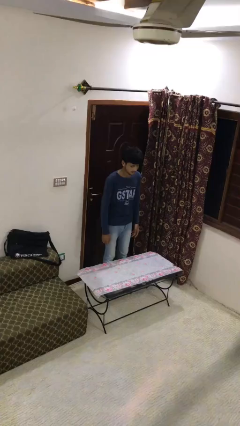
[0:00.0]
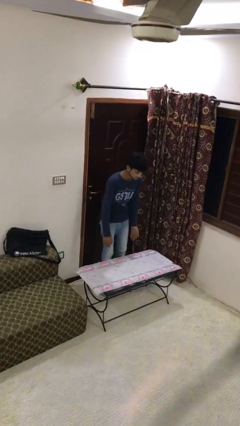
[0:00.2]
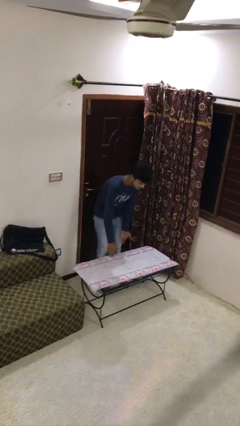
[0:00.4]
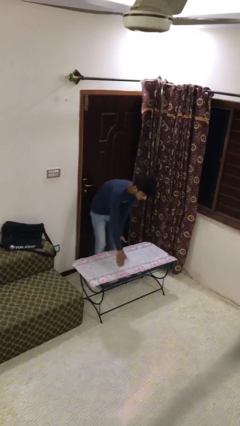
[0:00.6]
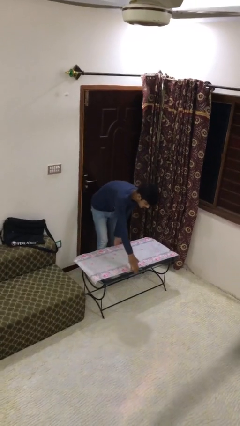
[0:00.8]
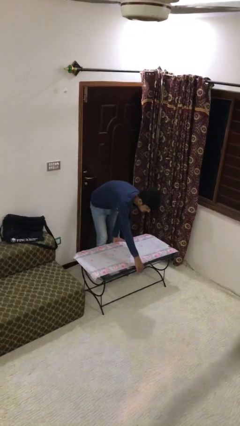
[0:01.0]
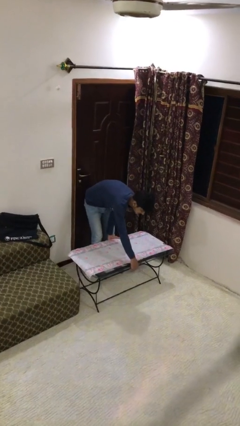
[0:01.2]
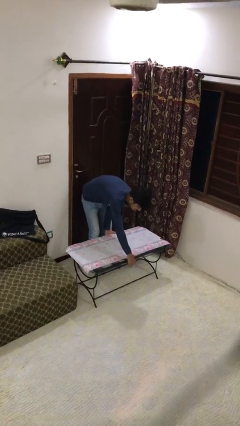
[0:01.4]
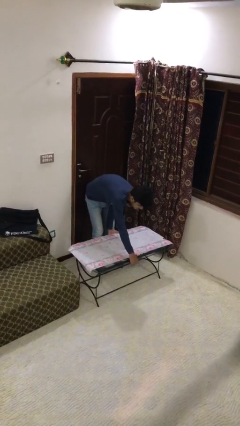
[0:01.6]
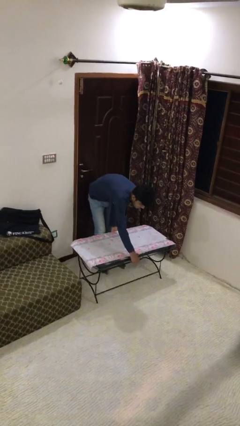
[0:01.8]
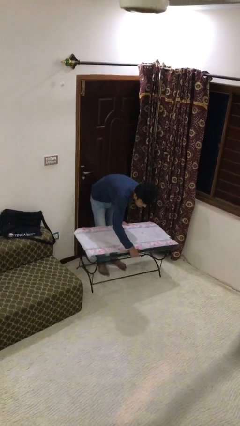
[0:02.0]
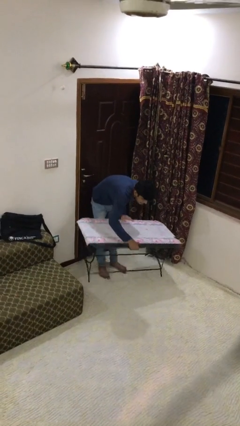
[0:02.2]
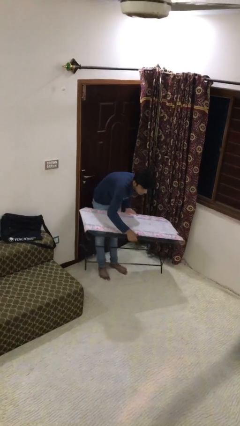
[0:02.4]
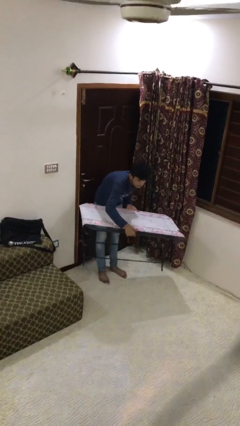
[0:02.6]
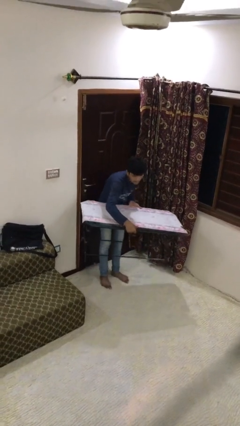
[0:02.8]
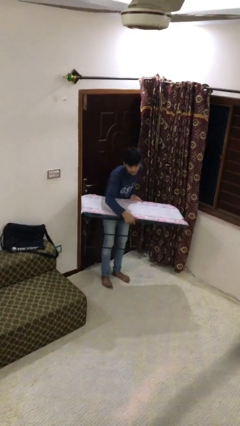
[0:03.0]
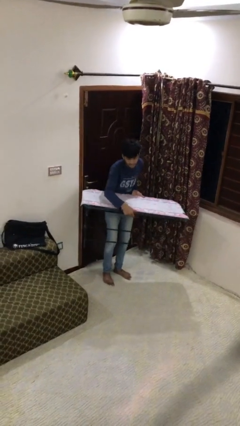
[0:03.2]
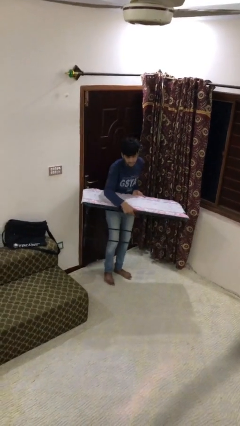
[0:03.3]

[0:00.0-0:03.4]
person picks up object from floor

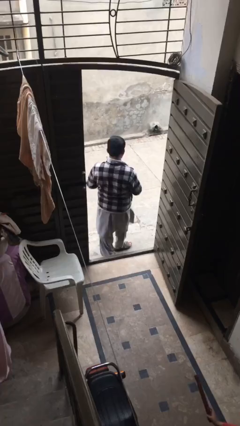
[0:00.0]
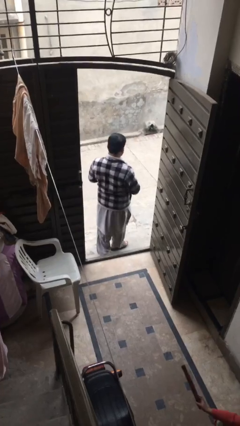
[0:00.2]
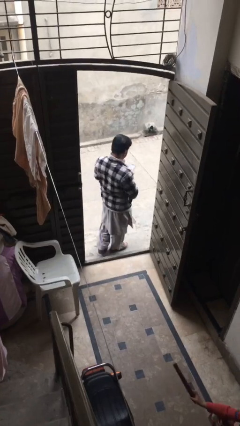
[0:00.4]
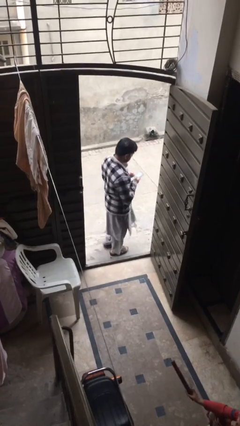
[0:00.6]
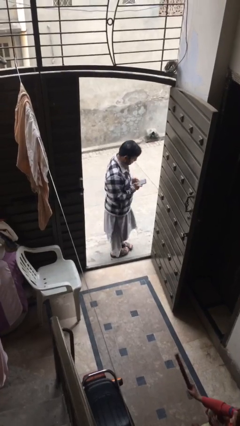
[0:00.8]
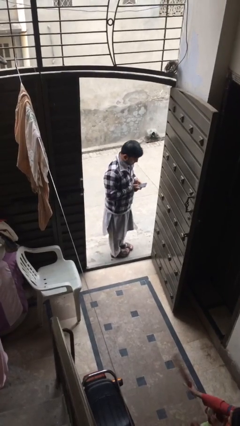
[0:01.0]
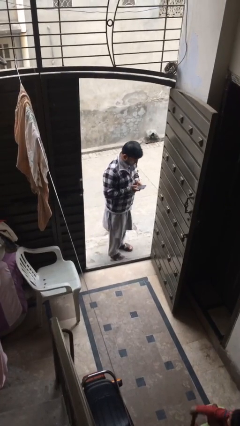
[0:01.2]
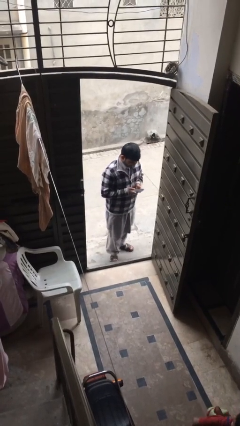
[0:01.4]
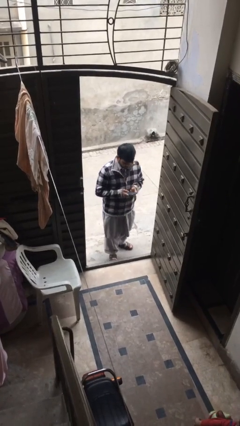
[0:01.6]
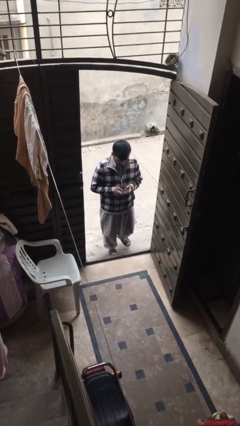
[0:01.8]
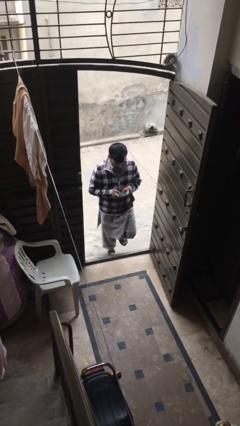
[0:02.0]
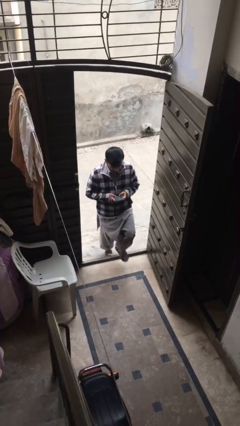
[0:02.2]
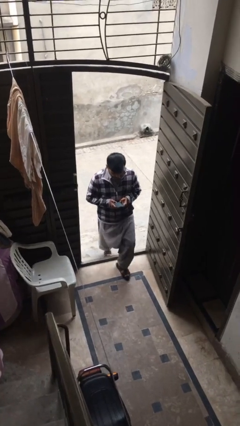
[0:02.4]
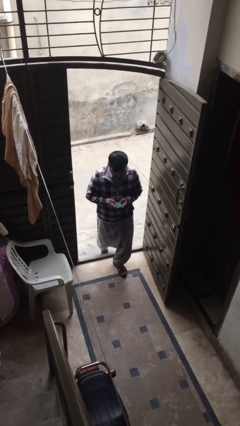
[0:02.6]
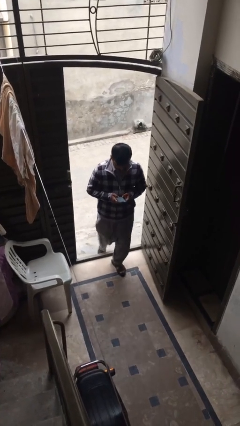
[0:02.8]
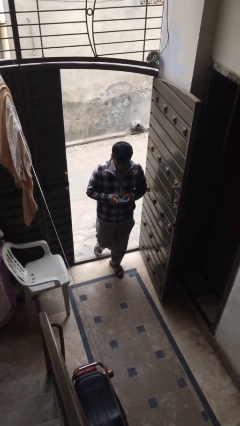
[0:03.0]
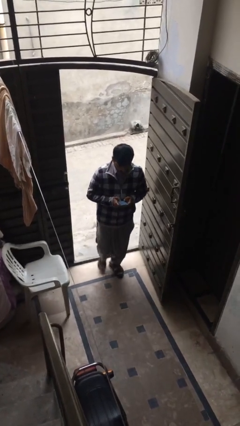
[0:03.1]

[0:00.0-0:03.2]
person enters scene through structure

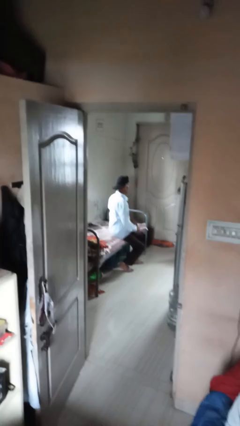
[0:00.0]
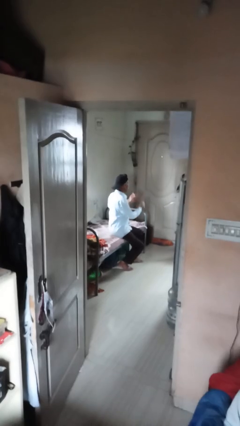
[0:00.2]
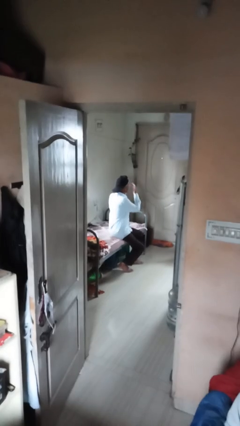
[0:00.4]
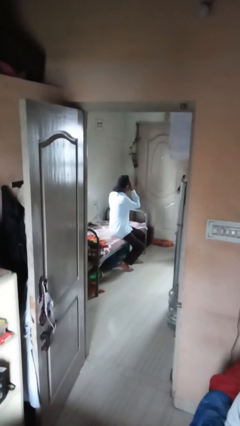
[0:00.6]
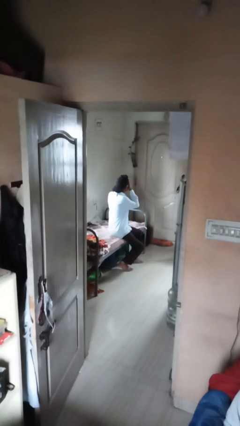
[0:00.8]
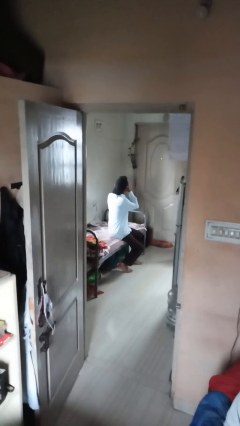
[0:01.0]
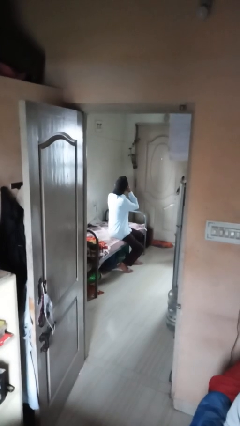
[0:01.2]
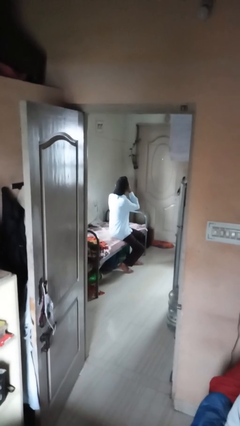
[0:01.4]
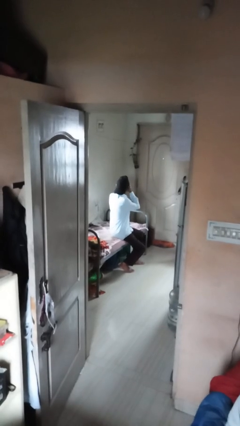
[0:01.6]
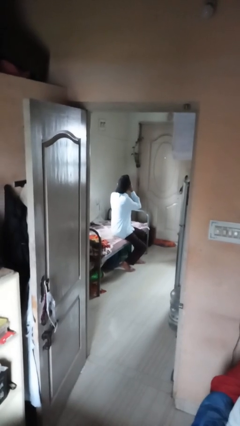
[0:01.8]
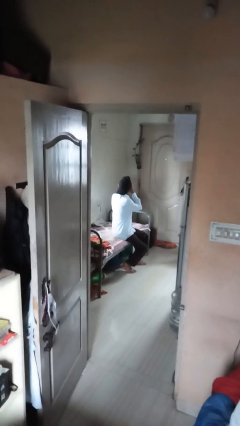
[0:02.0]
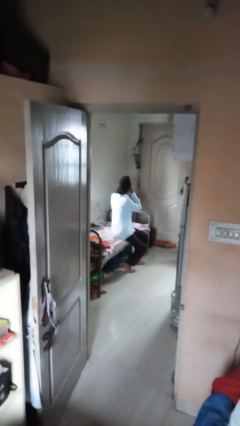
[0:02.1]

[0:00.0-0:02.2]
person covers face with hands

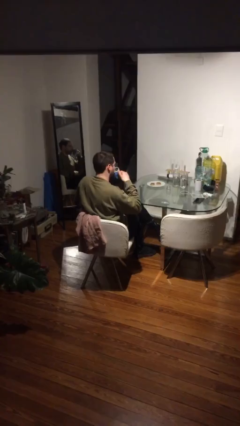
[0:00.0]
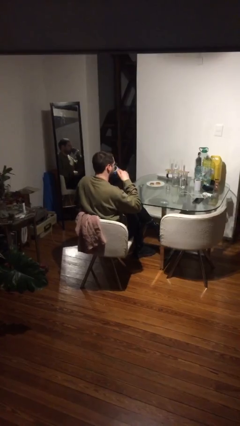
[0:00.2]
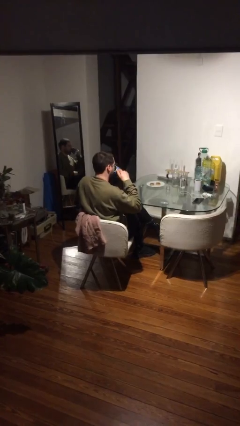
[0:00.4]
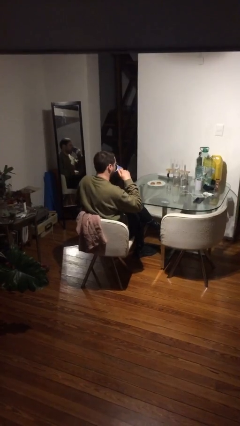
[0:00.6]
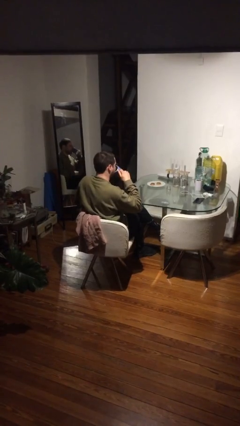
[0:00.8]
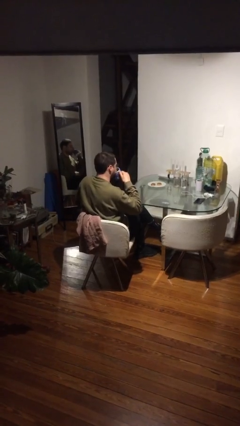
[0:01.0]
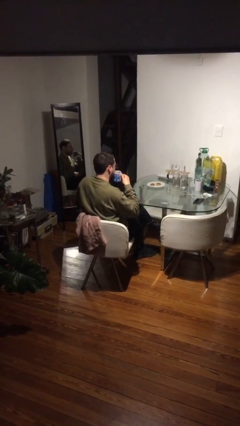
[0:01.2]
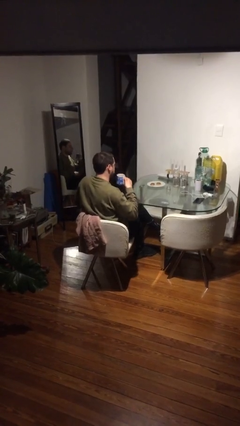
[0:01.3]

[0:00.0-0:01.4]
person drinks from mug

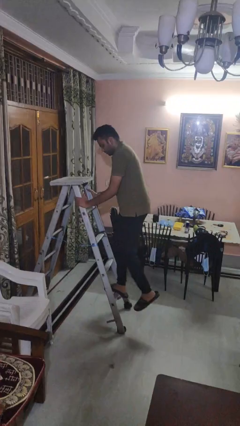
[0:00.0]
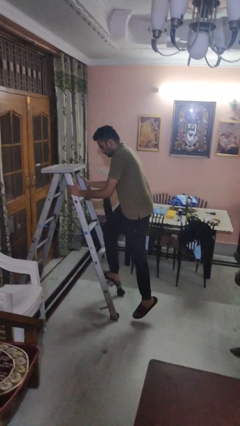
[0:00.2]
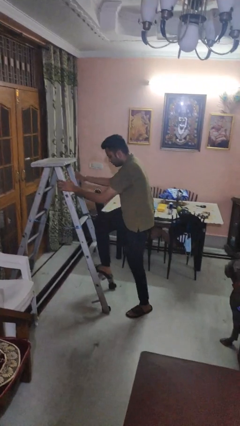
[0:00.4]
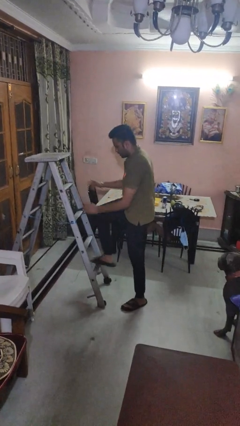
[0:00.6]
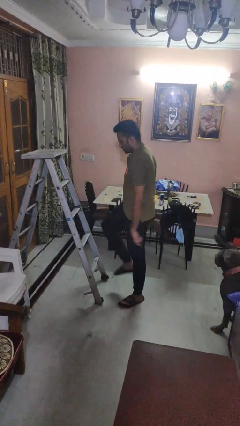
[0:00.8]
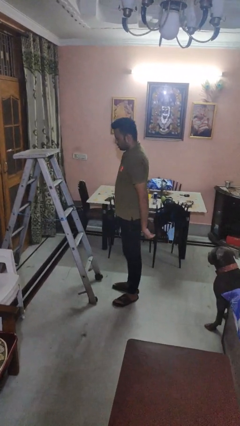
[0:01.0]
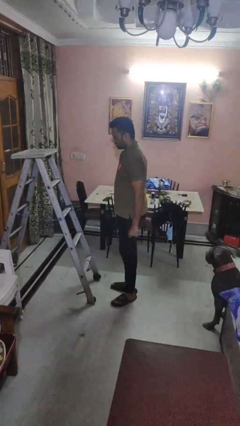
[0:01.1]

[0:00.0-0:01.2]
person climbs down ladder

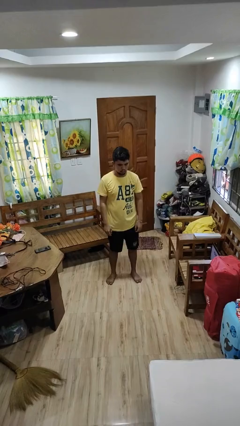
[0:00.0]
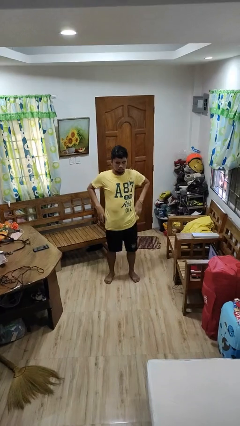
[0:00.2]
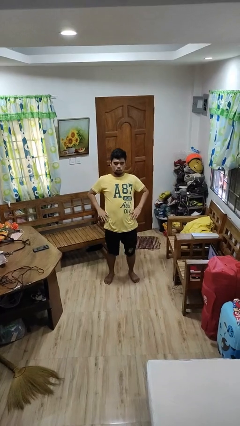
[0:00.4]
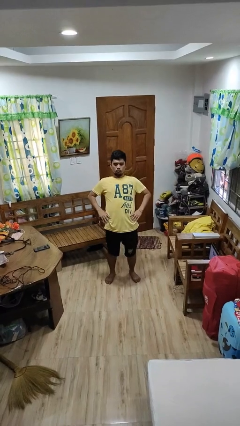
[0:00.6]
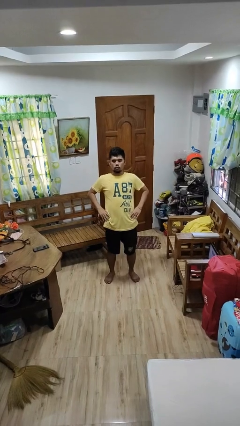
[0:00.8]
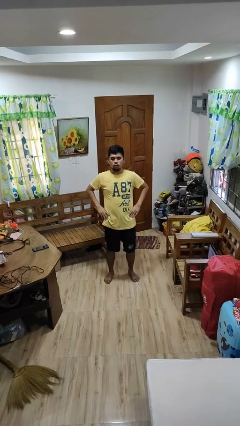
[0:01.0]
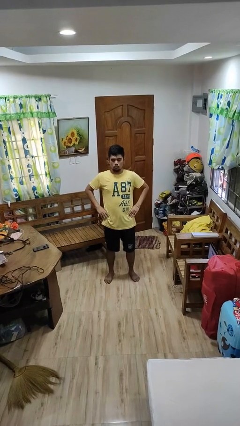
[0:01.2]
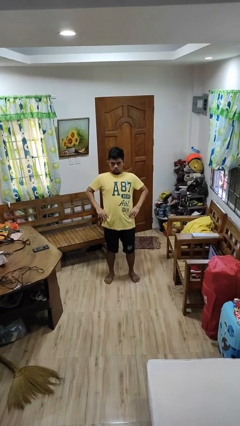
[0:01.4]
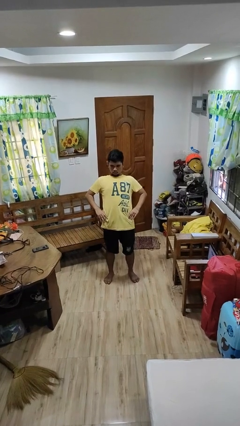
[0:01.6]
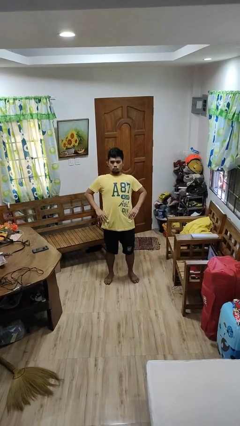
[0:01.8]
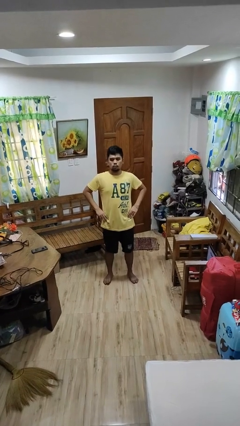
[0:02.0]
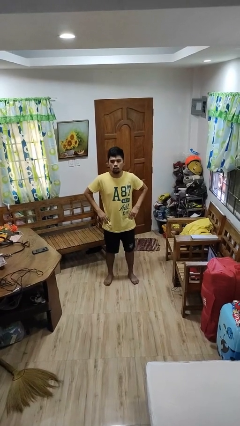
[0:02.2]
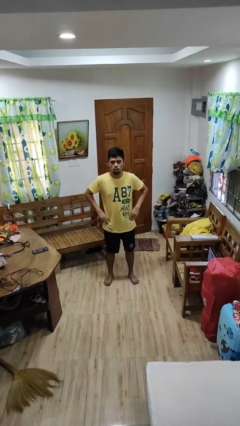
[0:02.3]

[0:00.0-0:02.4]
person stretches back

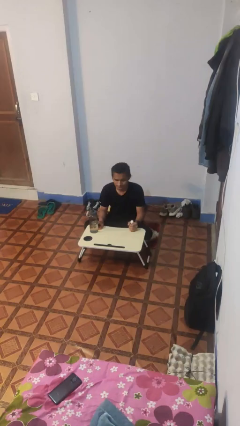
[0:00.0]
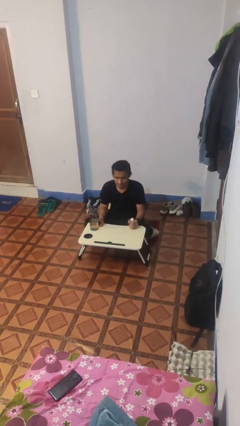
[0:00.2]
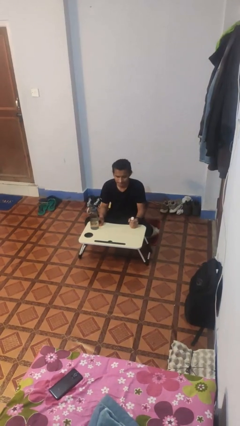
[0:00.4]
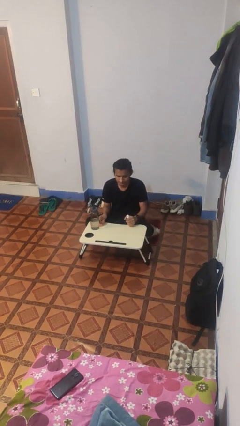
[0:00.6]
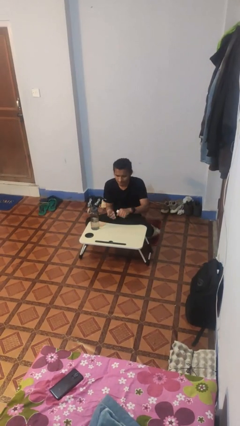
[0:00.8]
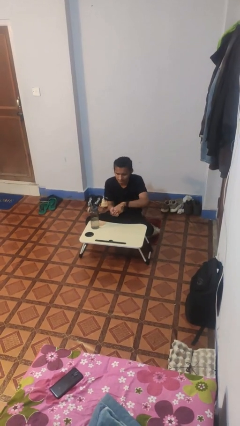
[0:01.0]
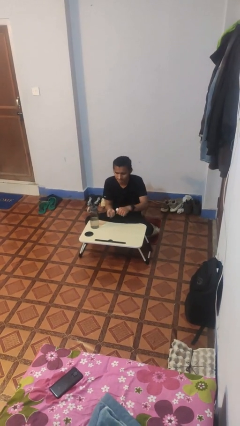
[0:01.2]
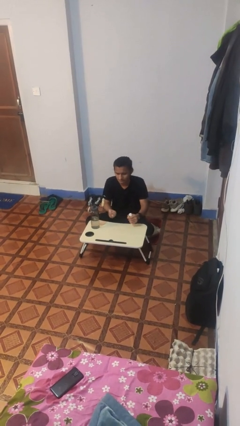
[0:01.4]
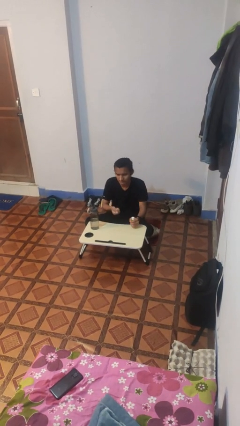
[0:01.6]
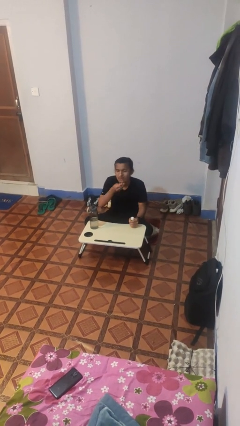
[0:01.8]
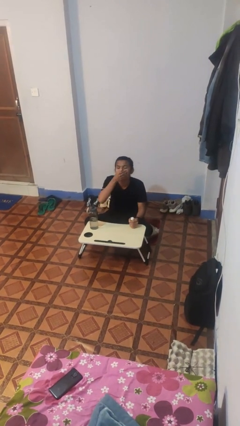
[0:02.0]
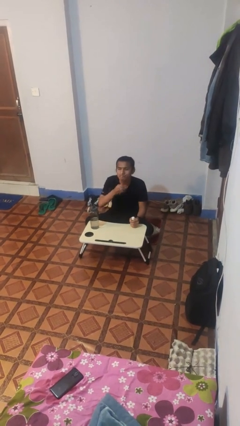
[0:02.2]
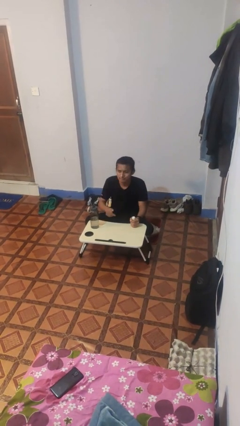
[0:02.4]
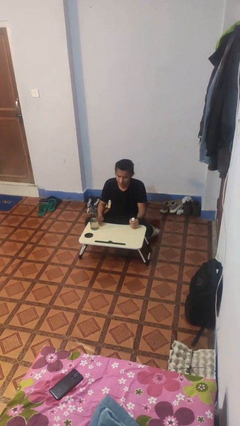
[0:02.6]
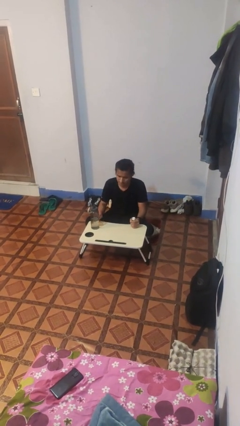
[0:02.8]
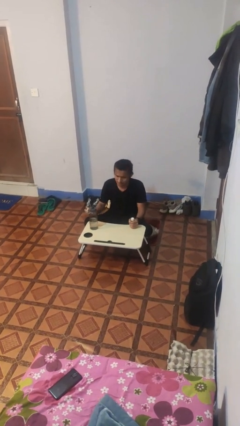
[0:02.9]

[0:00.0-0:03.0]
person takes medicine pills

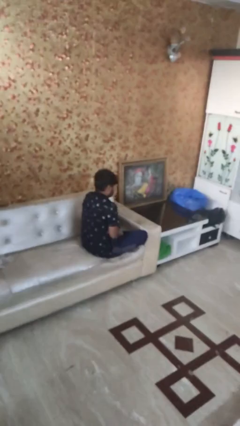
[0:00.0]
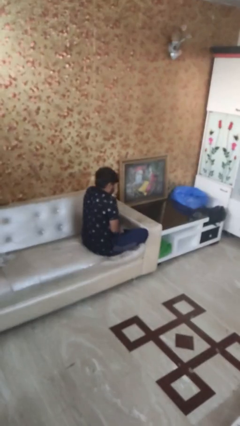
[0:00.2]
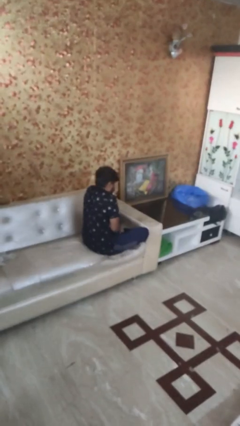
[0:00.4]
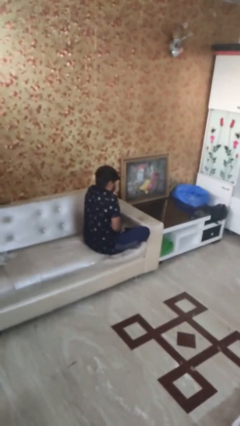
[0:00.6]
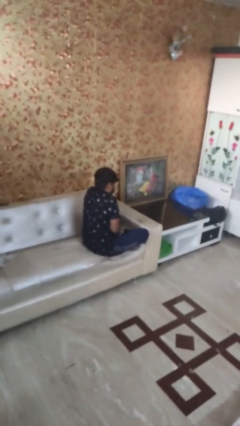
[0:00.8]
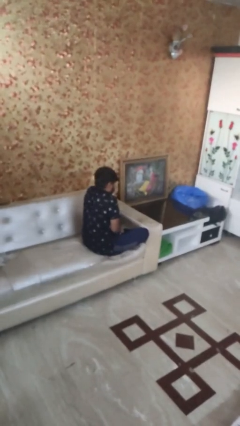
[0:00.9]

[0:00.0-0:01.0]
person shrugs
